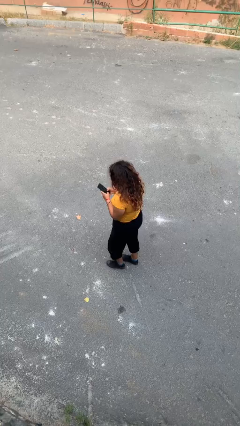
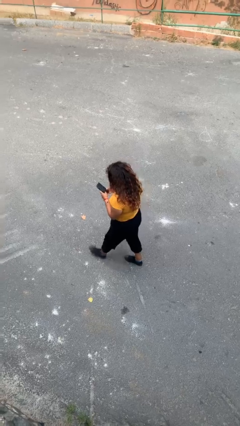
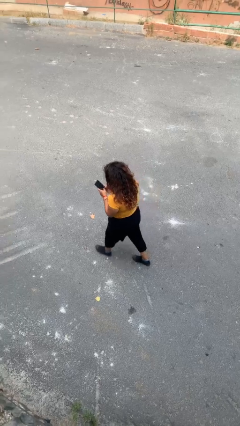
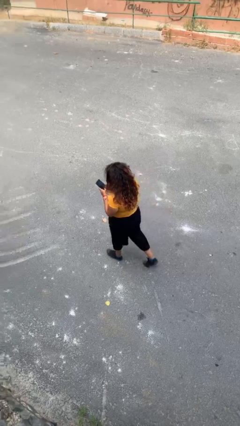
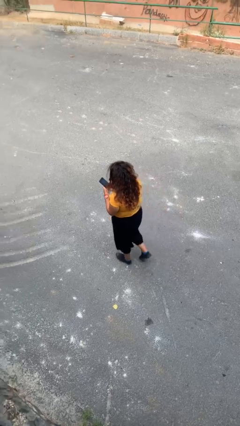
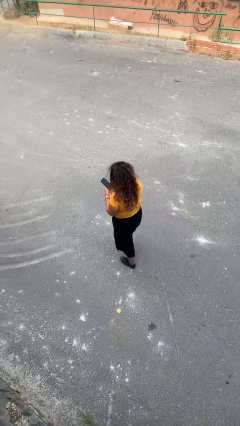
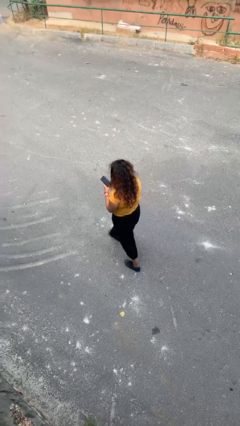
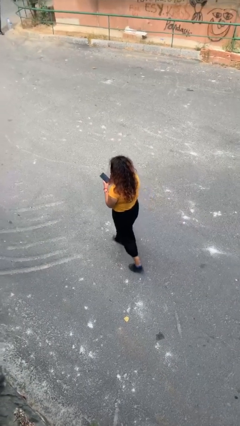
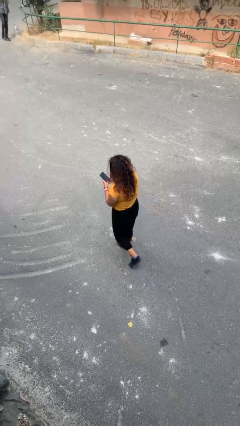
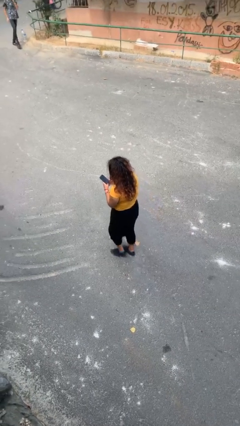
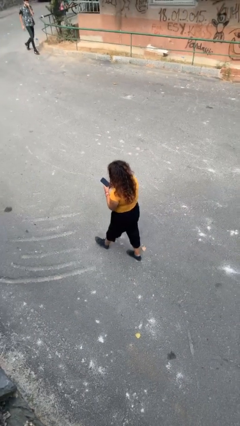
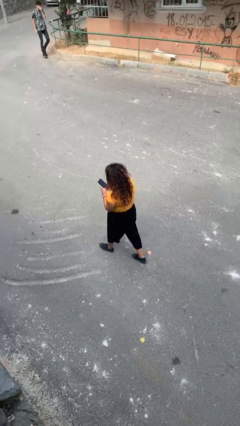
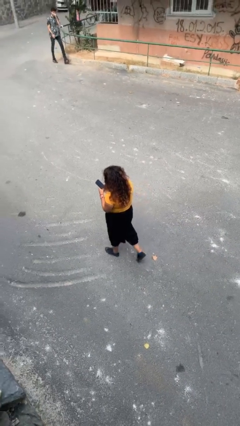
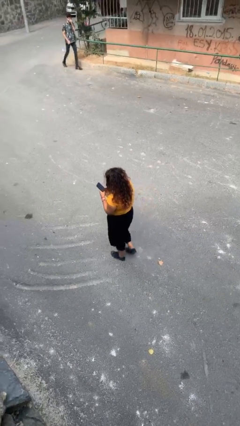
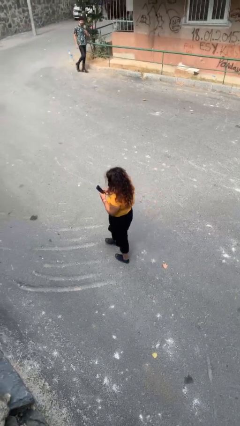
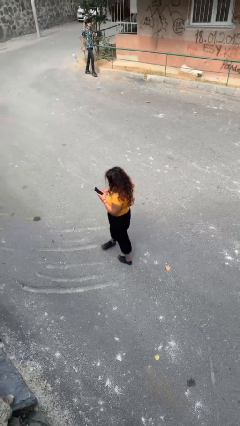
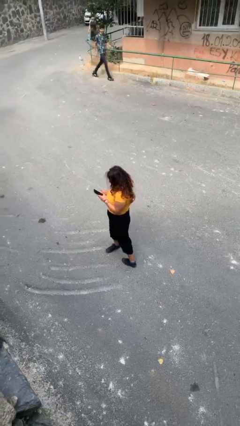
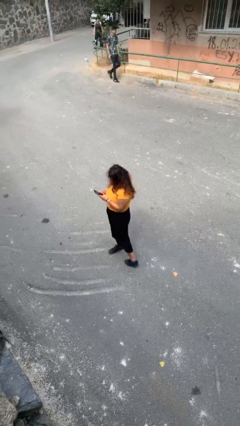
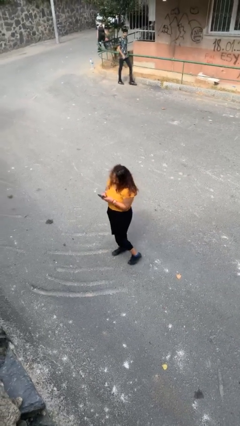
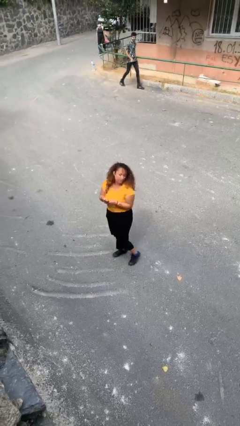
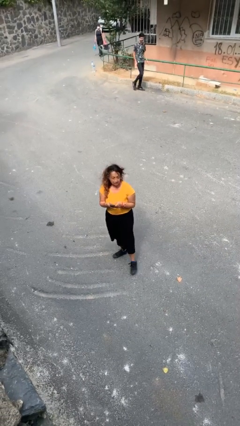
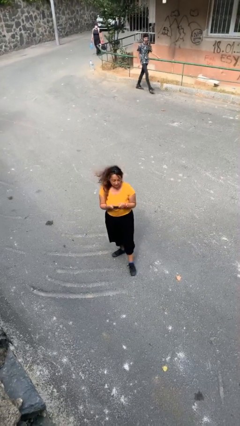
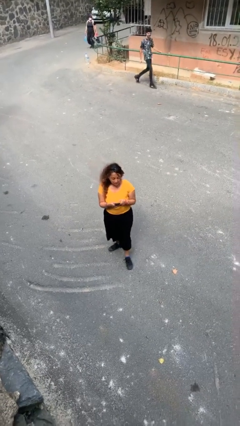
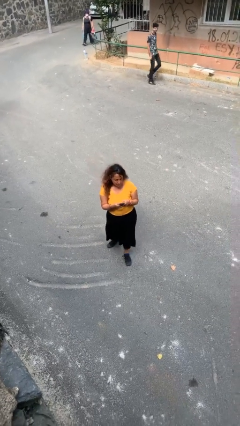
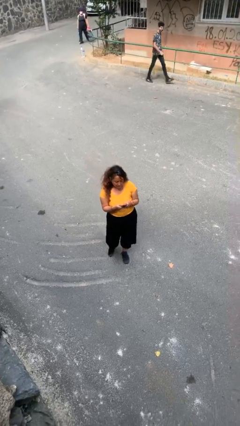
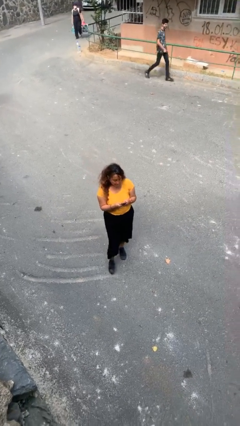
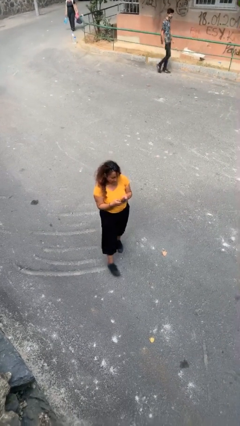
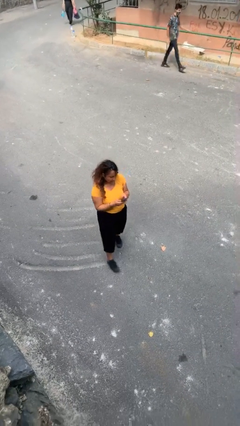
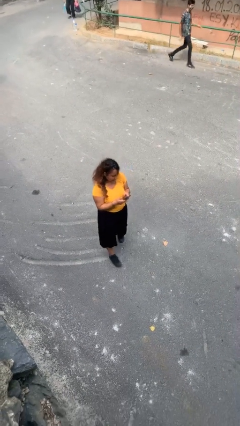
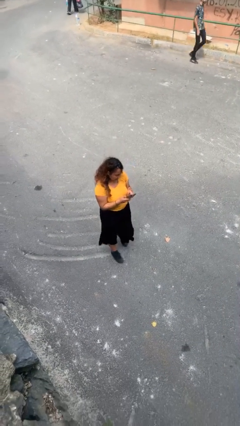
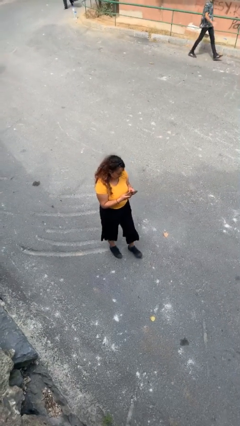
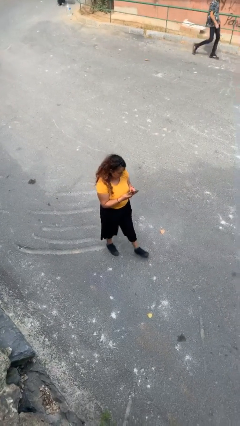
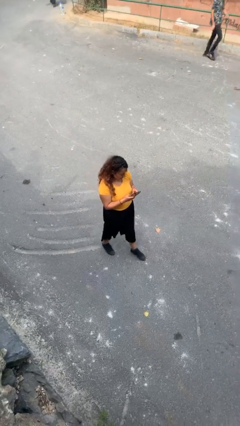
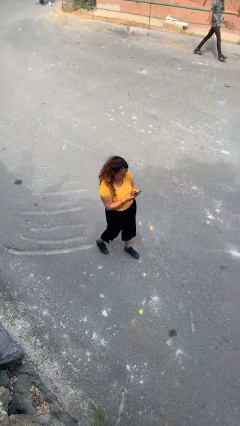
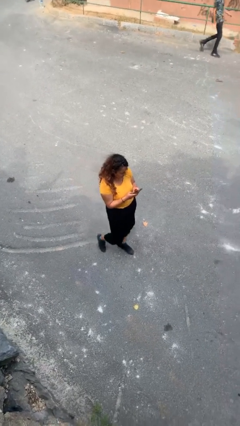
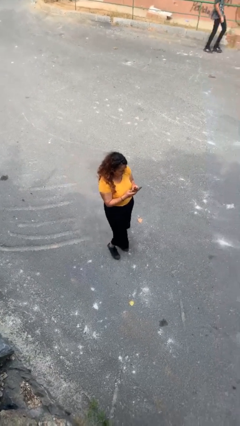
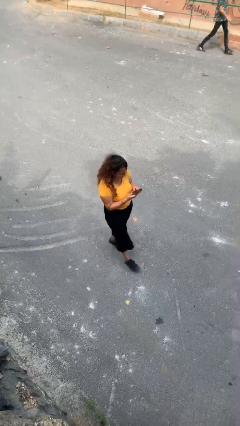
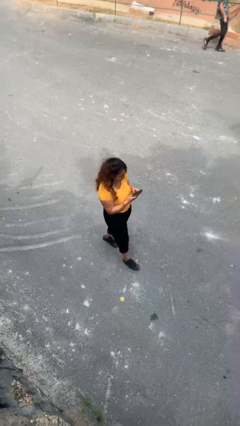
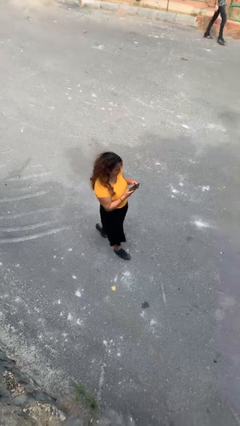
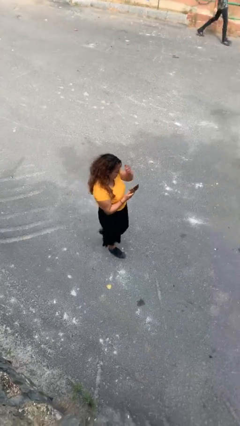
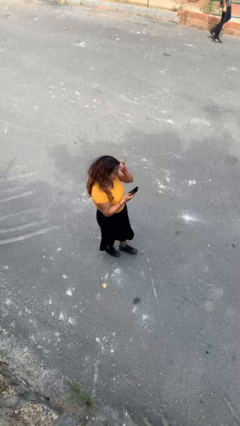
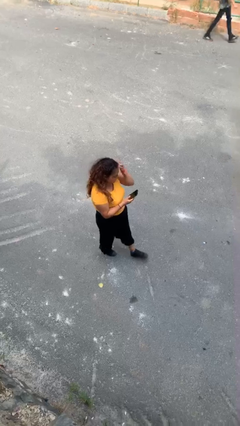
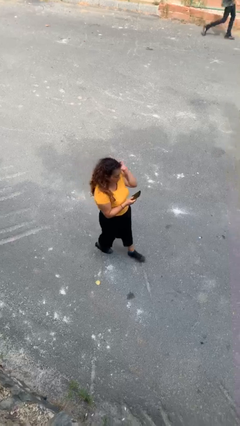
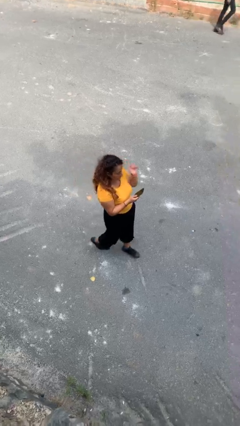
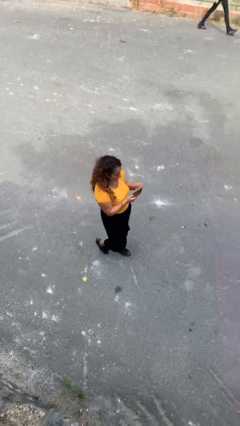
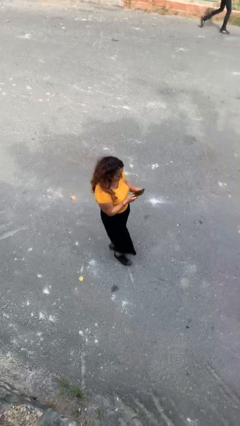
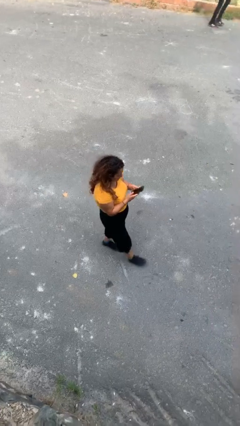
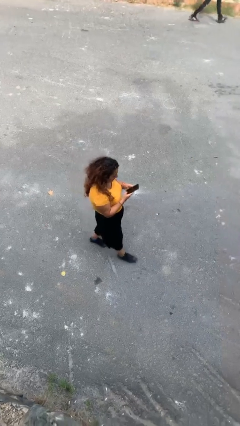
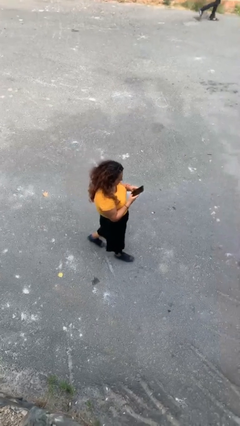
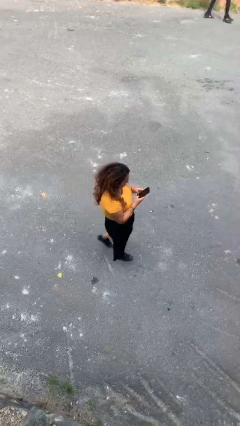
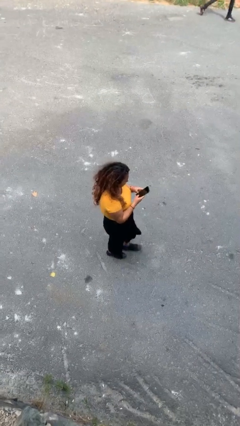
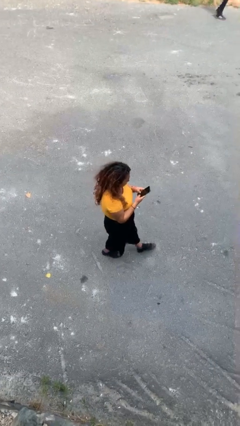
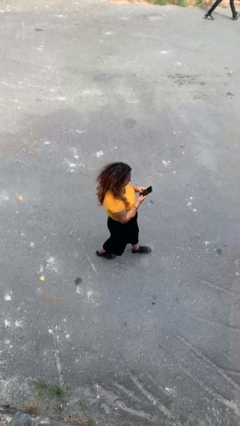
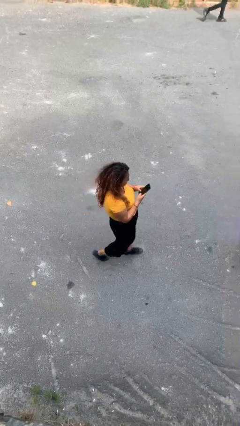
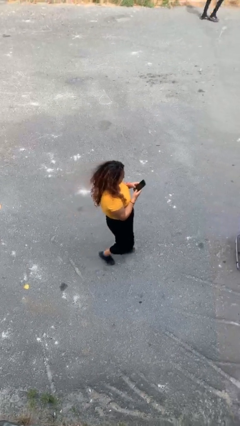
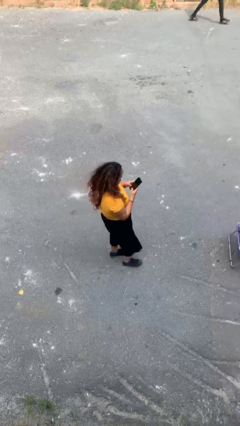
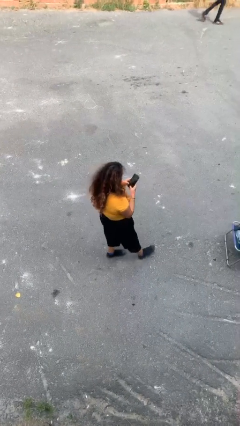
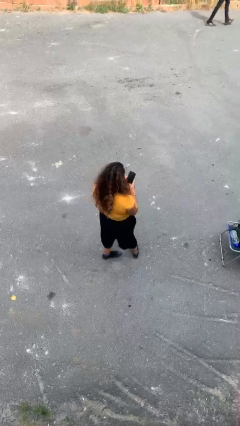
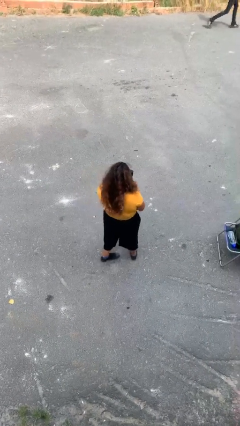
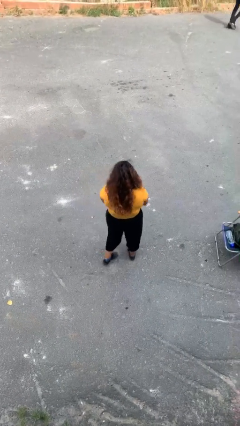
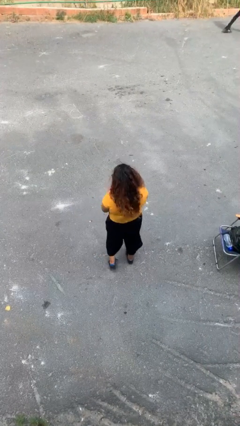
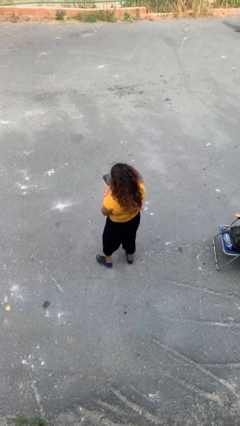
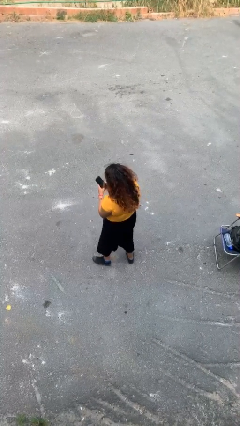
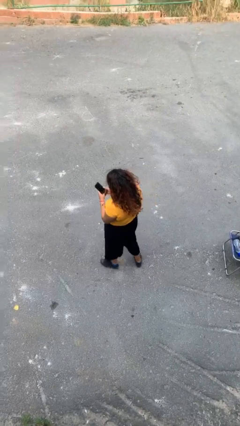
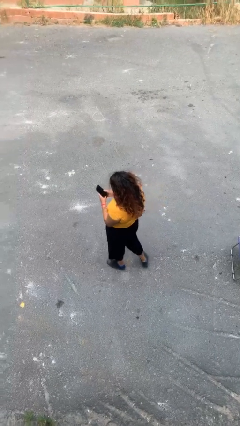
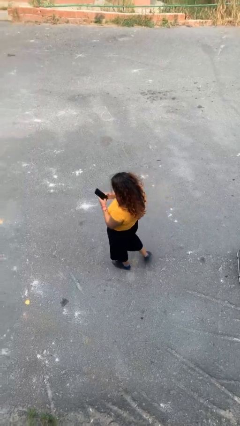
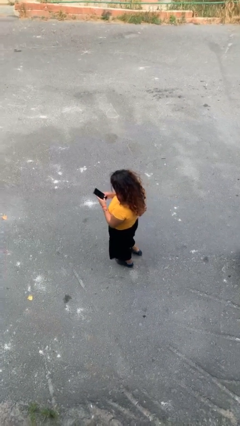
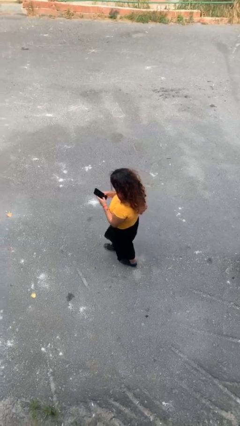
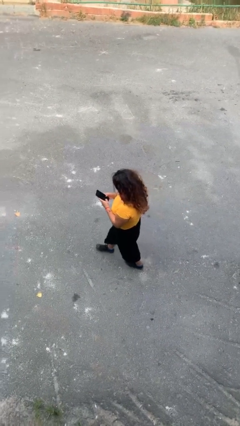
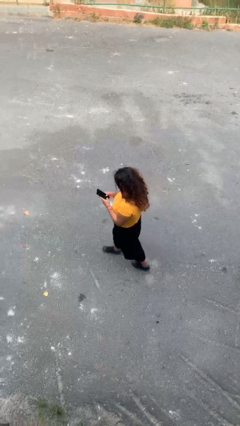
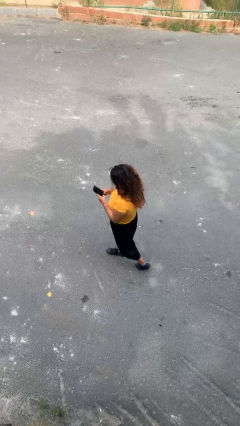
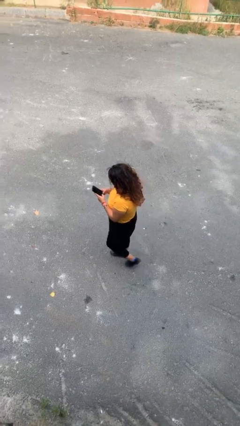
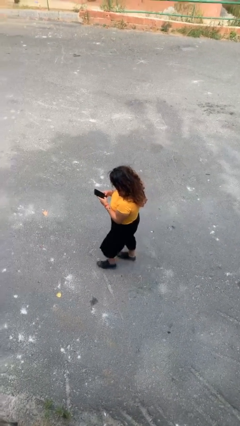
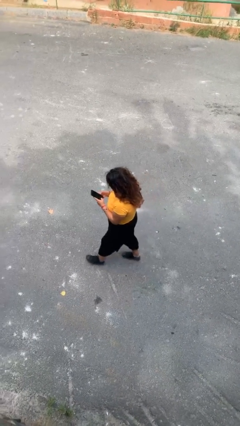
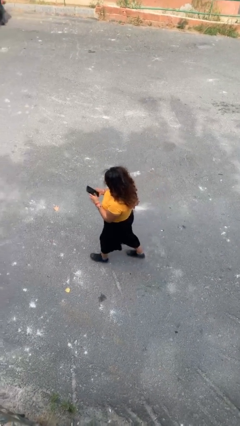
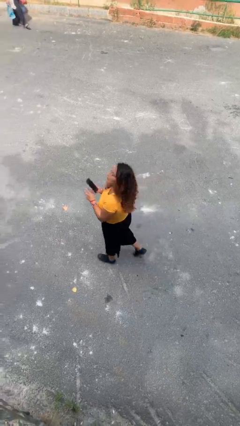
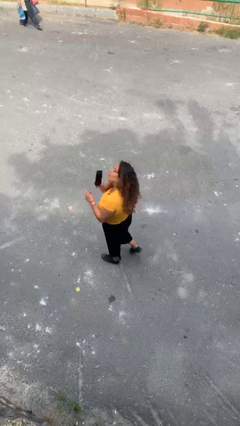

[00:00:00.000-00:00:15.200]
person texts on phone

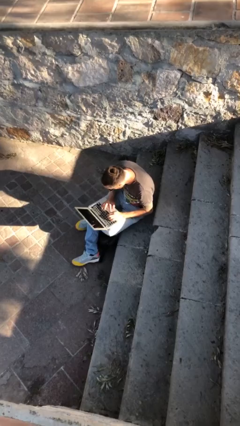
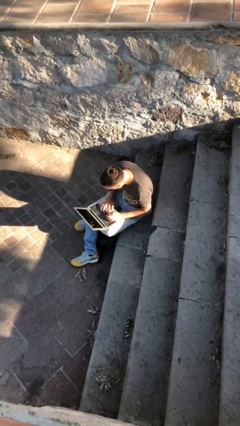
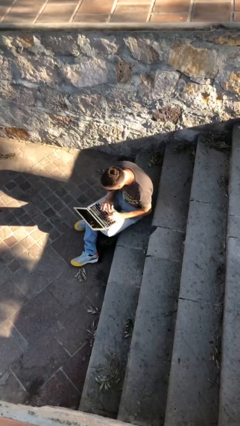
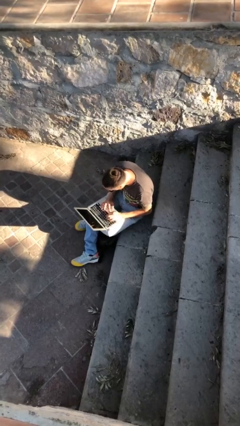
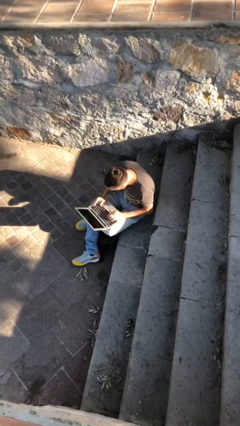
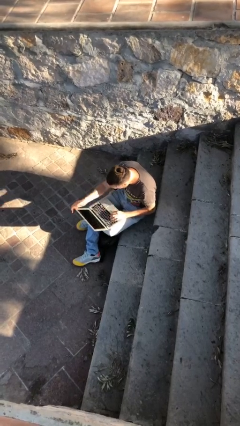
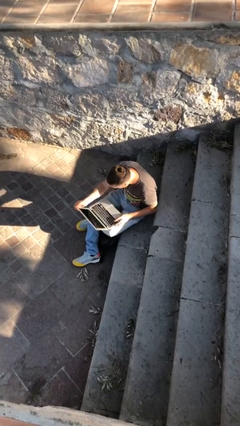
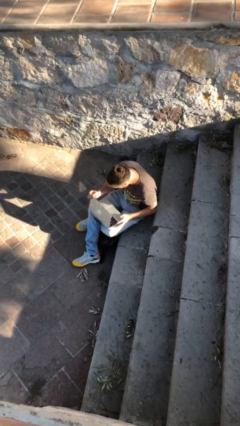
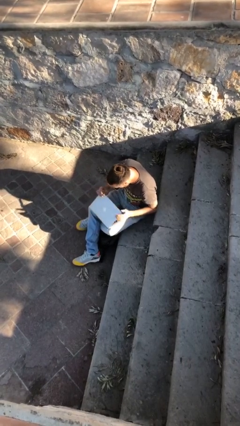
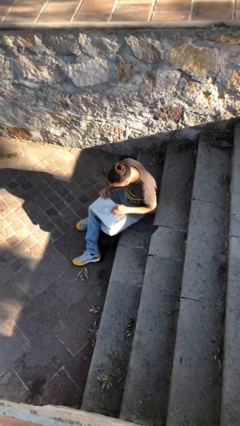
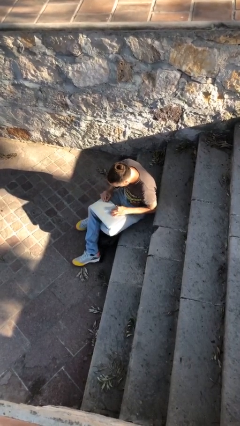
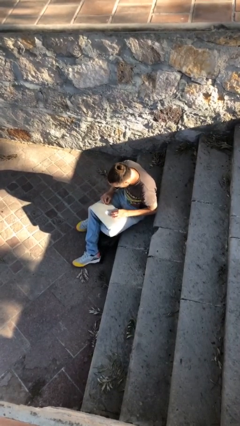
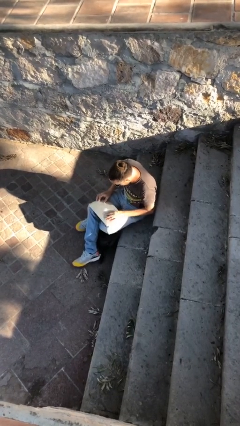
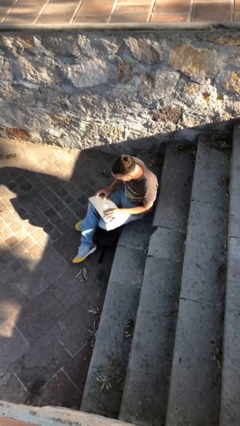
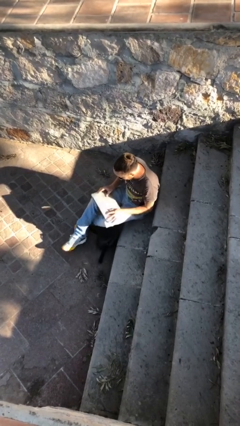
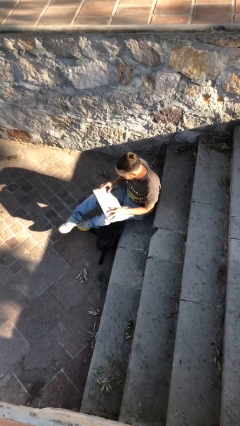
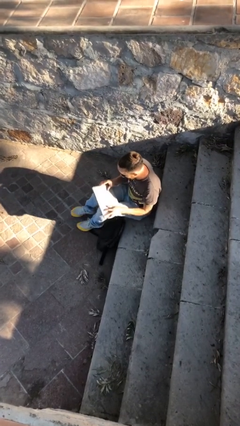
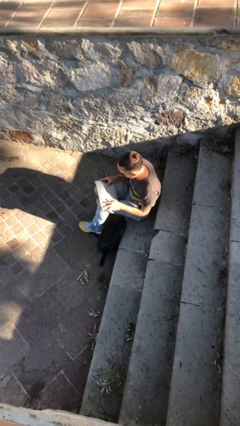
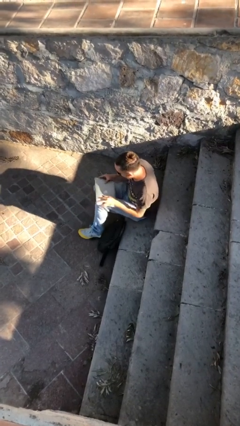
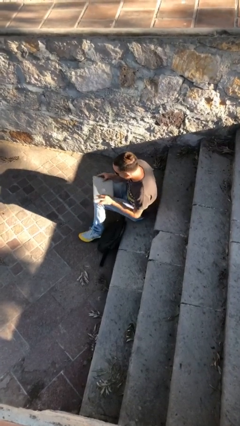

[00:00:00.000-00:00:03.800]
person interacts with laptop
